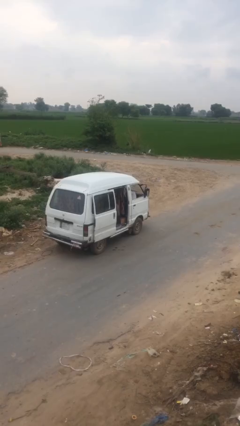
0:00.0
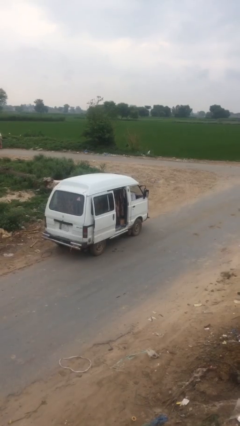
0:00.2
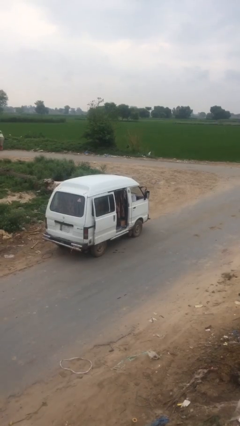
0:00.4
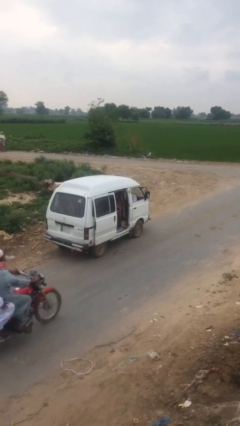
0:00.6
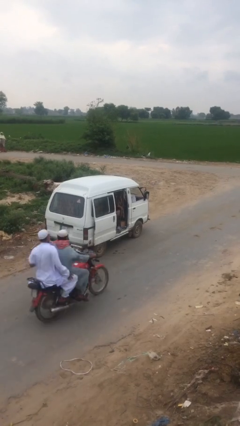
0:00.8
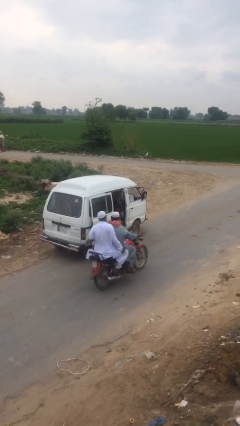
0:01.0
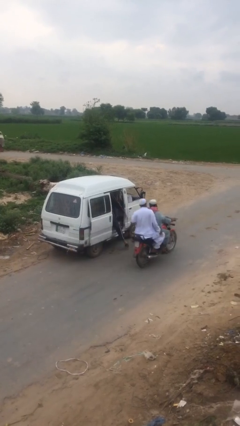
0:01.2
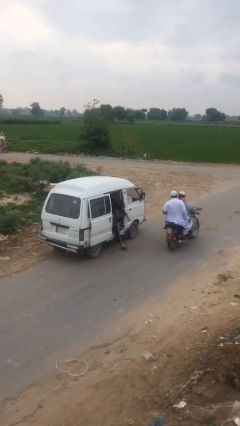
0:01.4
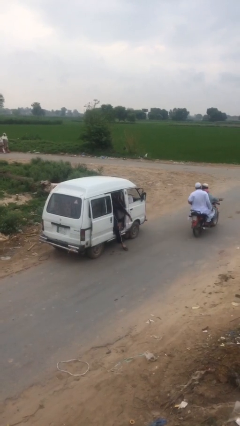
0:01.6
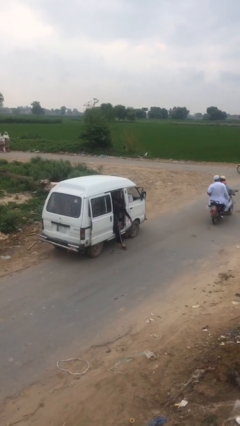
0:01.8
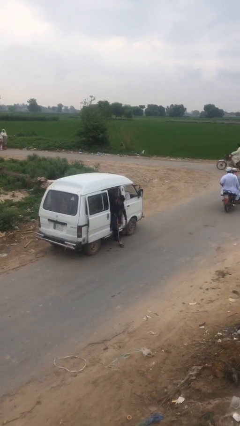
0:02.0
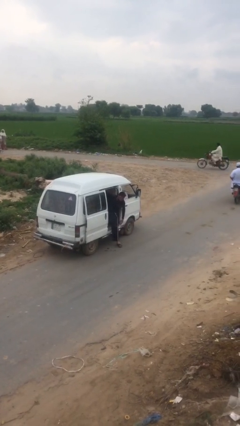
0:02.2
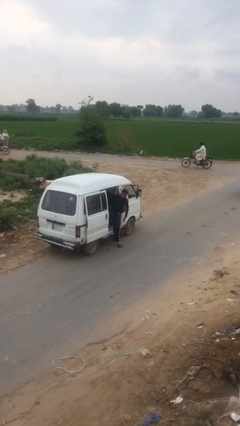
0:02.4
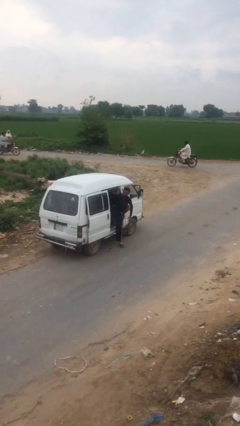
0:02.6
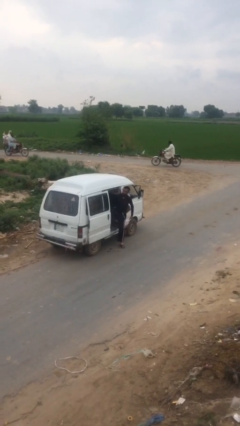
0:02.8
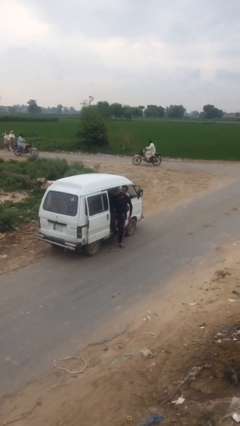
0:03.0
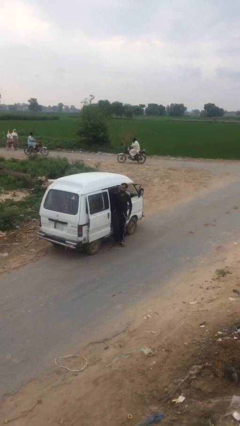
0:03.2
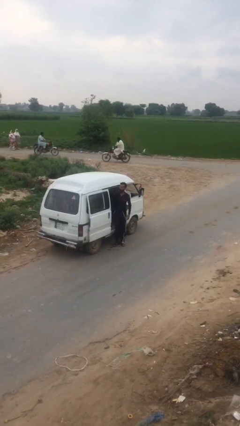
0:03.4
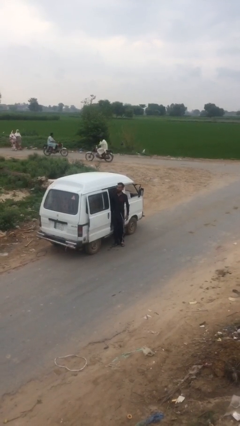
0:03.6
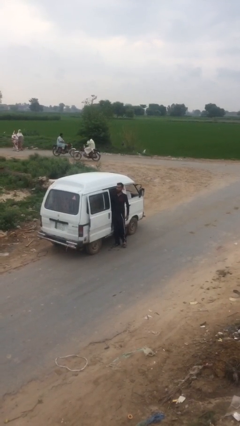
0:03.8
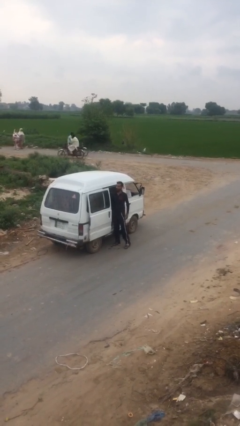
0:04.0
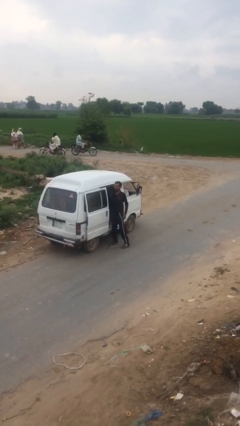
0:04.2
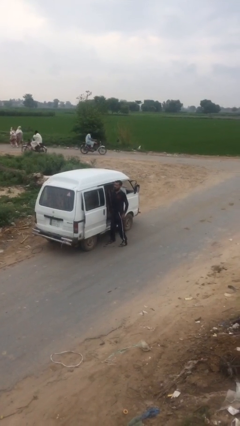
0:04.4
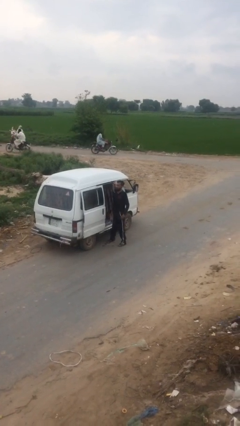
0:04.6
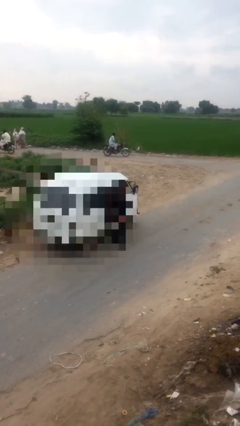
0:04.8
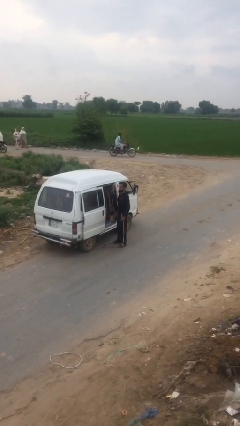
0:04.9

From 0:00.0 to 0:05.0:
person exits car

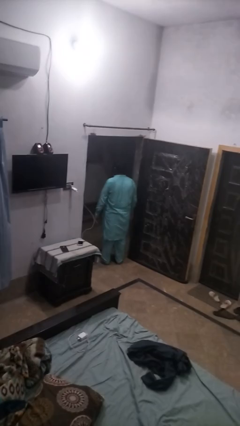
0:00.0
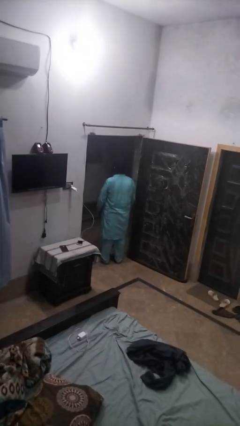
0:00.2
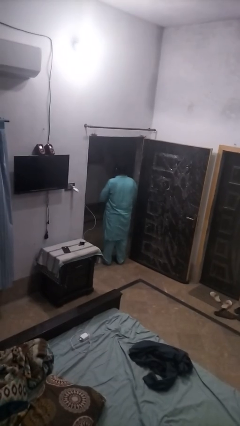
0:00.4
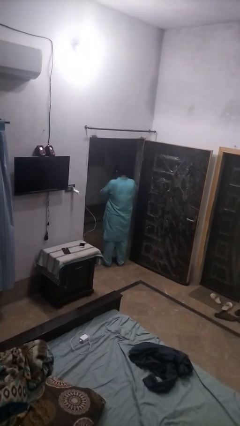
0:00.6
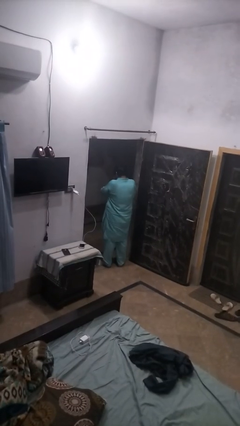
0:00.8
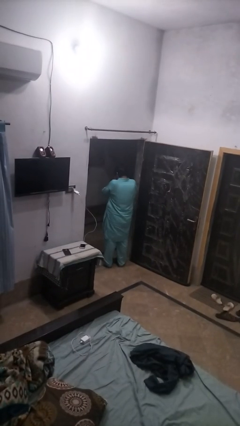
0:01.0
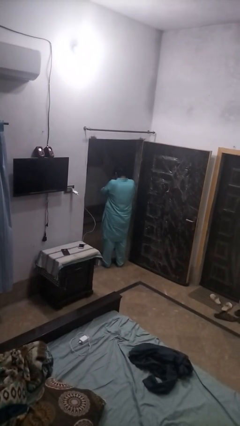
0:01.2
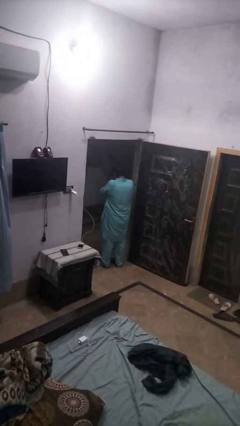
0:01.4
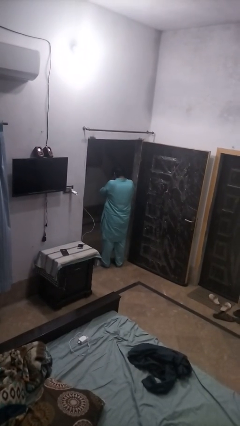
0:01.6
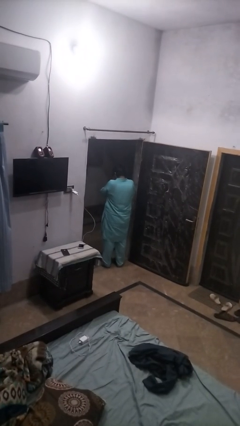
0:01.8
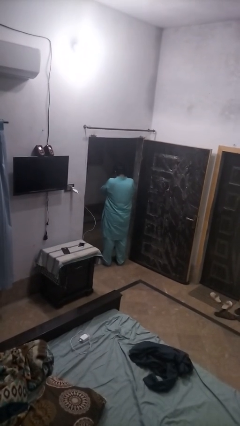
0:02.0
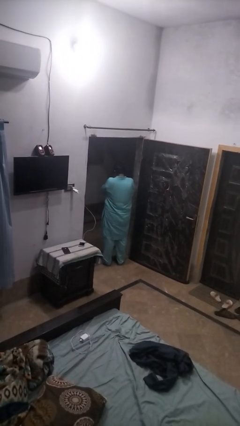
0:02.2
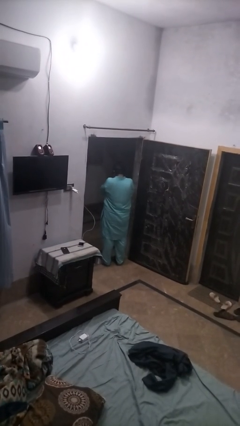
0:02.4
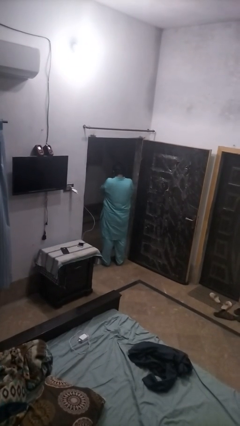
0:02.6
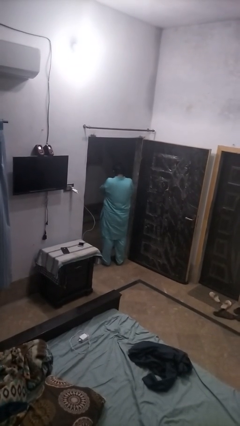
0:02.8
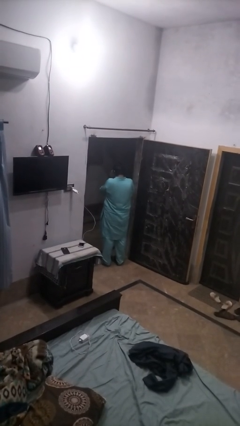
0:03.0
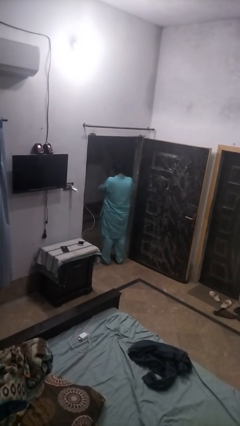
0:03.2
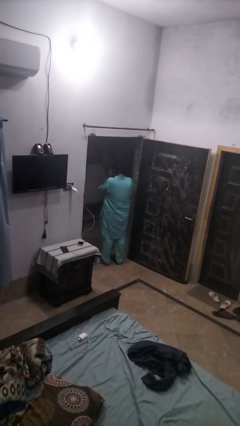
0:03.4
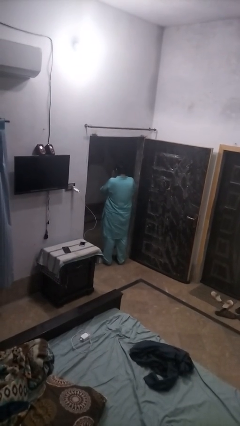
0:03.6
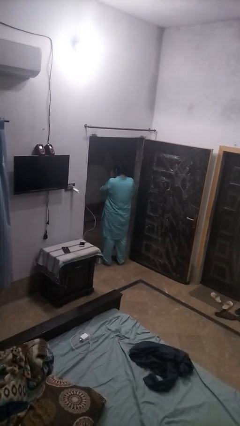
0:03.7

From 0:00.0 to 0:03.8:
person blows into hands

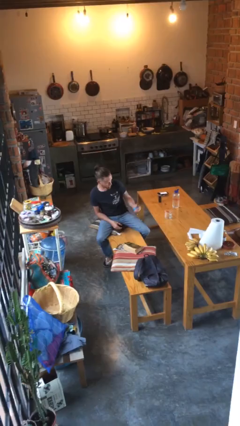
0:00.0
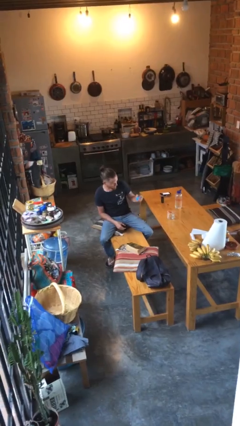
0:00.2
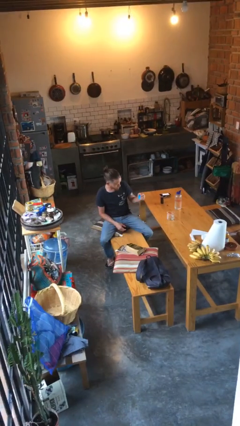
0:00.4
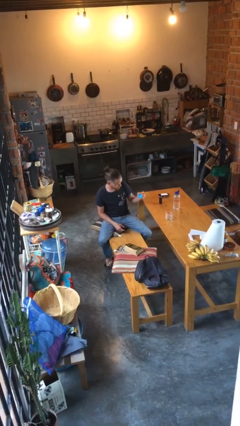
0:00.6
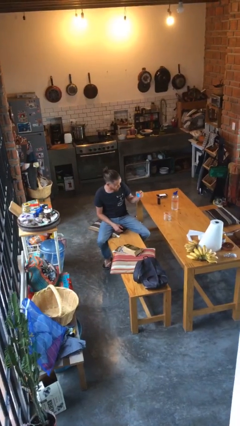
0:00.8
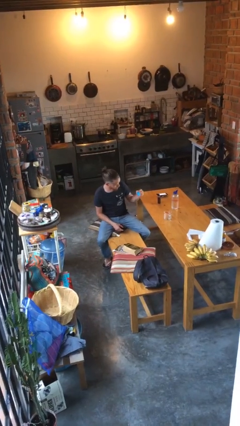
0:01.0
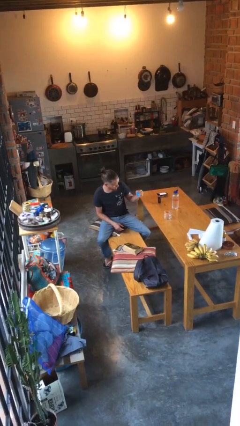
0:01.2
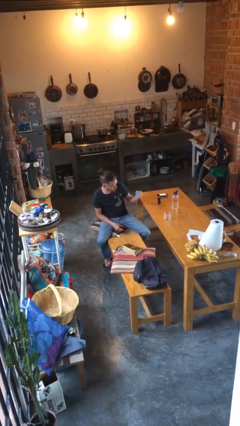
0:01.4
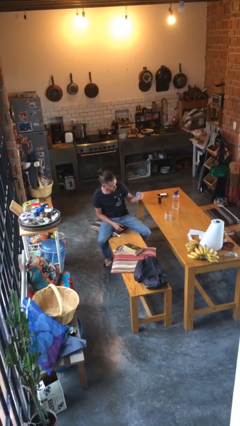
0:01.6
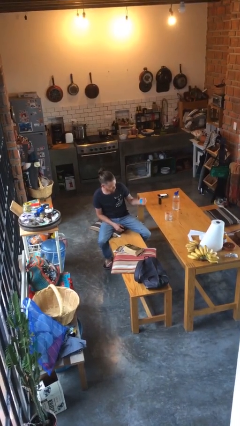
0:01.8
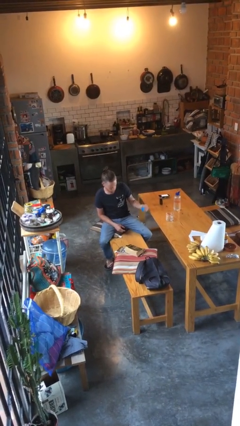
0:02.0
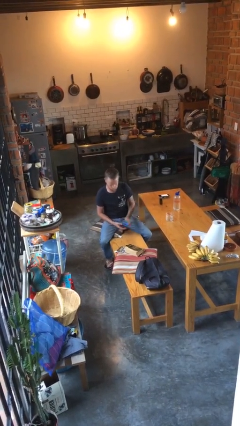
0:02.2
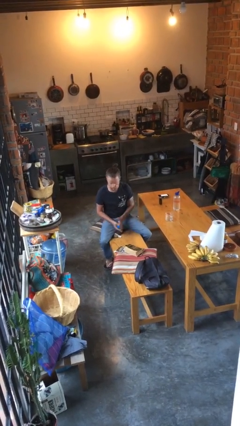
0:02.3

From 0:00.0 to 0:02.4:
person squeezes object

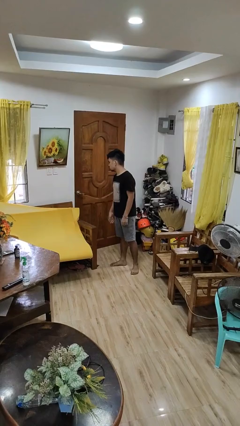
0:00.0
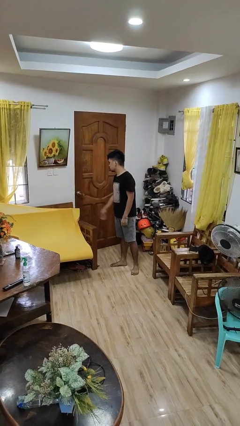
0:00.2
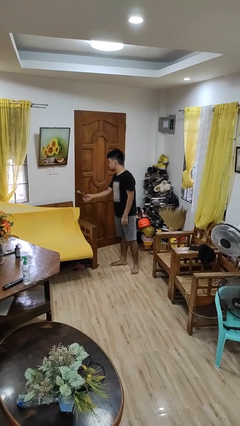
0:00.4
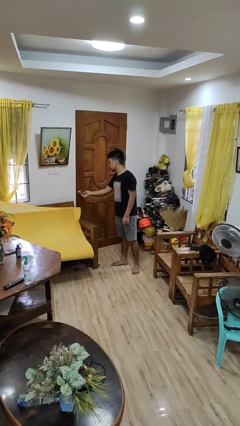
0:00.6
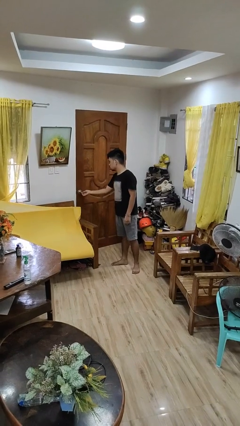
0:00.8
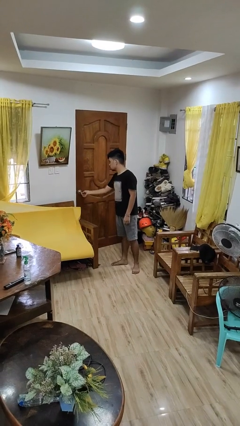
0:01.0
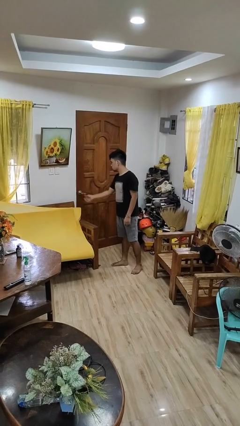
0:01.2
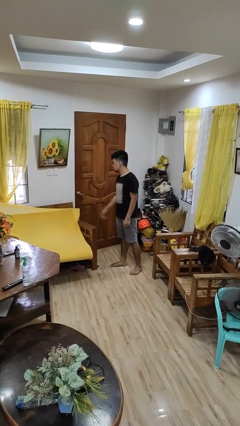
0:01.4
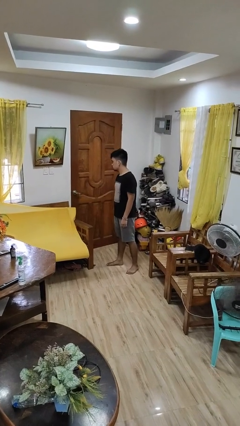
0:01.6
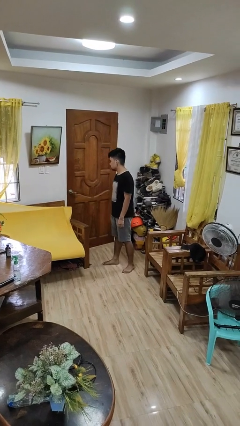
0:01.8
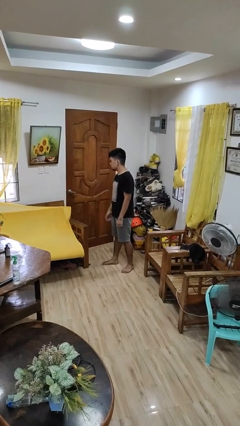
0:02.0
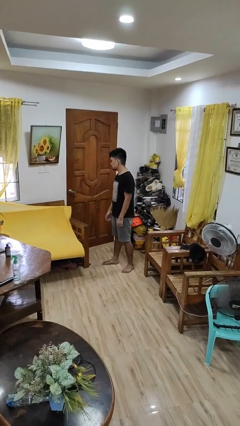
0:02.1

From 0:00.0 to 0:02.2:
person locks door with keys

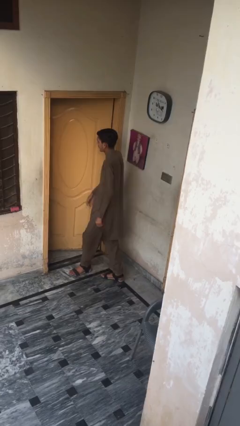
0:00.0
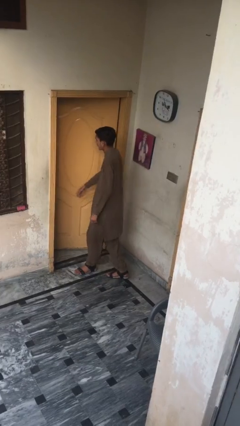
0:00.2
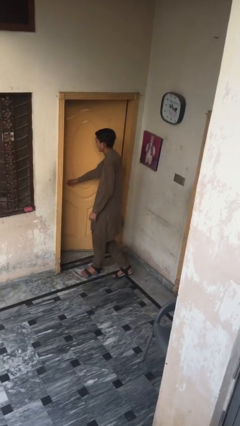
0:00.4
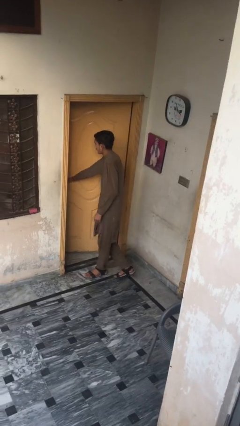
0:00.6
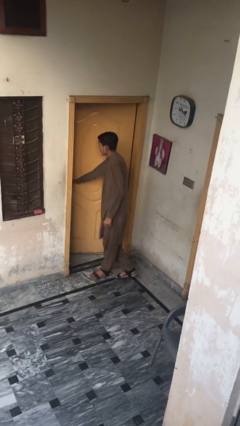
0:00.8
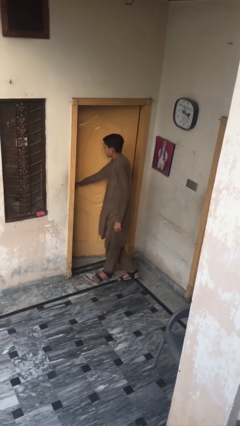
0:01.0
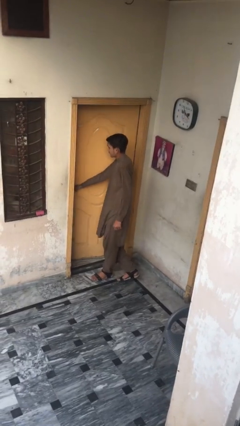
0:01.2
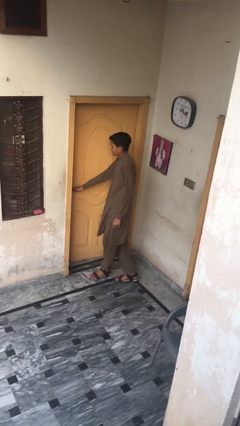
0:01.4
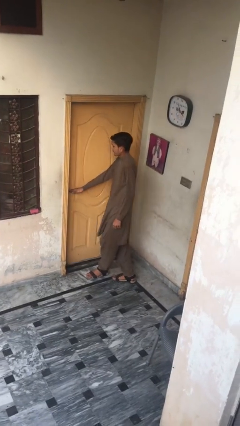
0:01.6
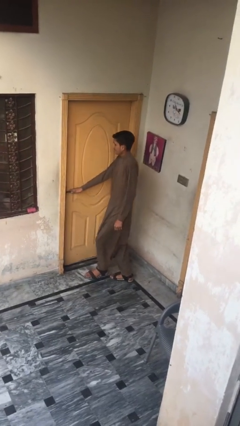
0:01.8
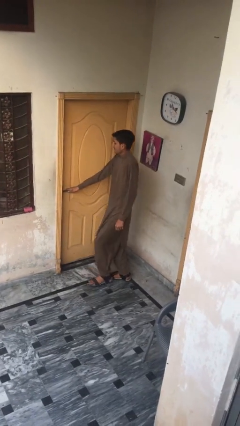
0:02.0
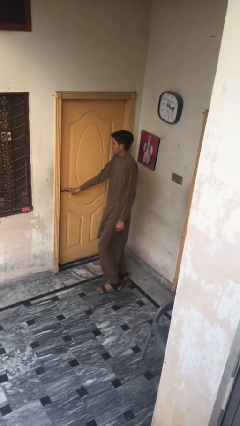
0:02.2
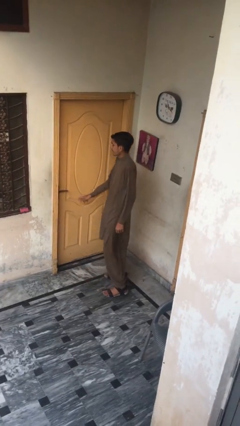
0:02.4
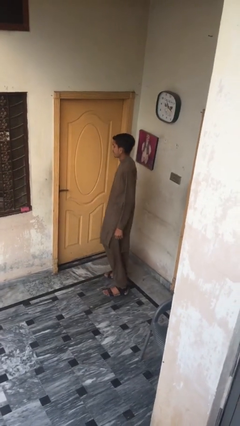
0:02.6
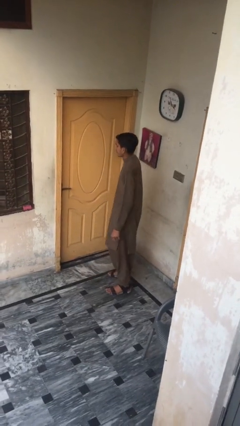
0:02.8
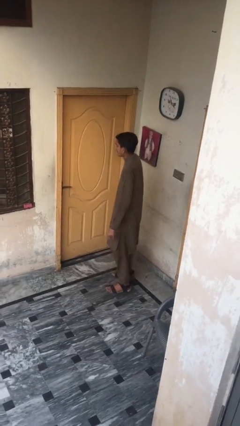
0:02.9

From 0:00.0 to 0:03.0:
person closes facility door

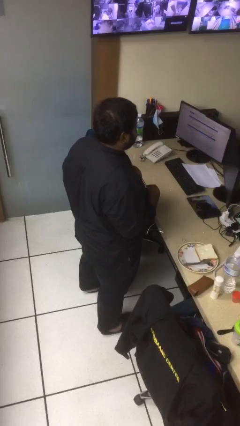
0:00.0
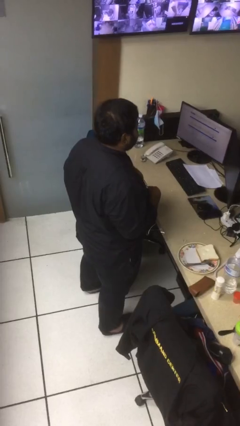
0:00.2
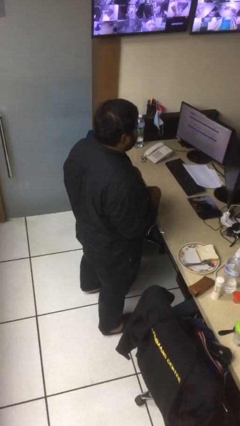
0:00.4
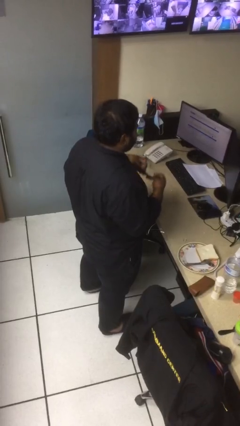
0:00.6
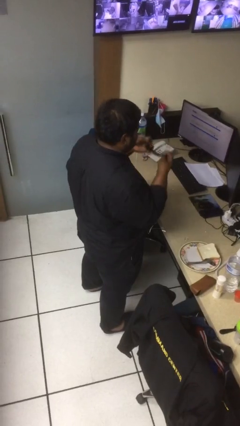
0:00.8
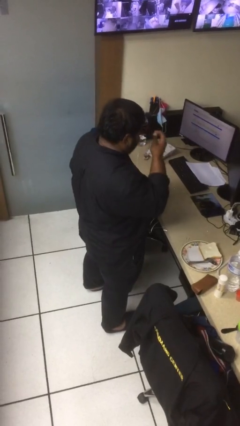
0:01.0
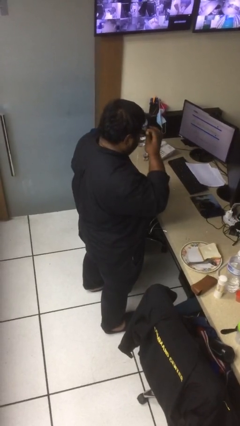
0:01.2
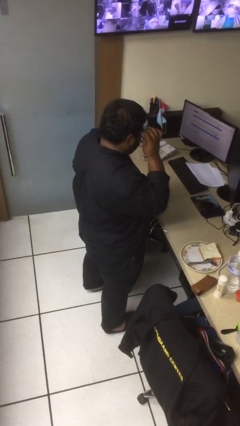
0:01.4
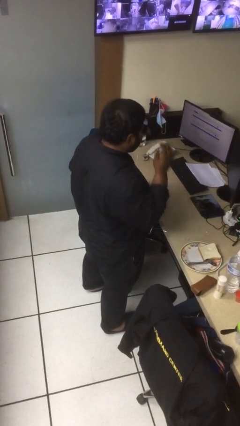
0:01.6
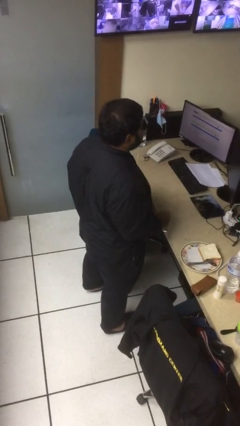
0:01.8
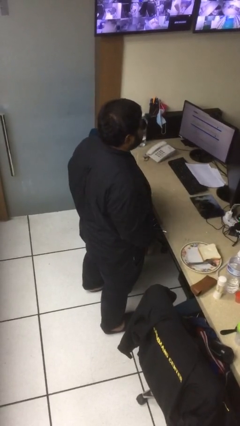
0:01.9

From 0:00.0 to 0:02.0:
person puts on sunglasses
